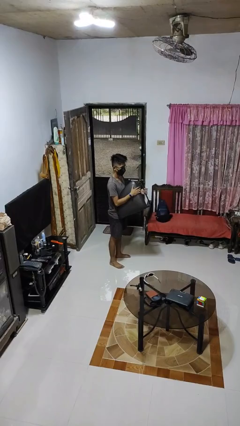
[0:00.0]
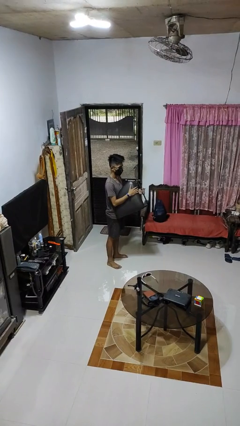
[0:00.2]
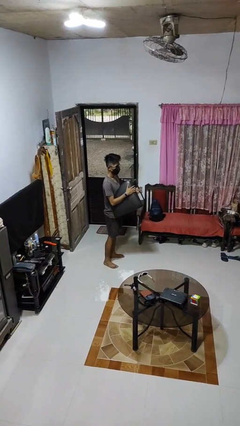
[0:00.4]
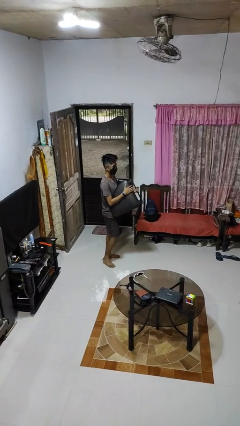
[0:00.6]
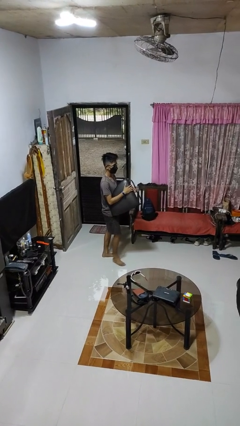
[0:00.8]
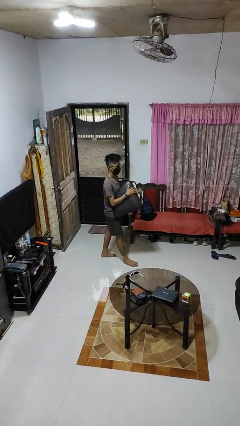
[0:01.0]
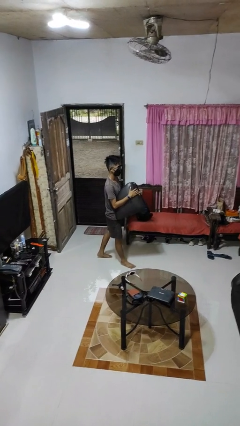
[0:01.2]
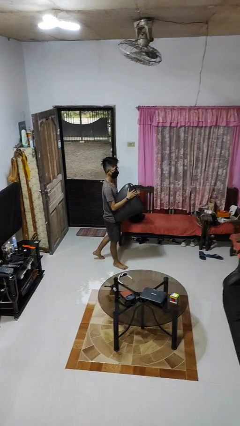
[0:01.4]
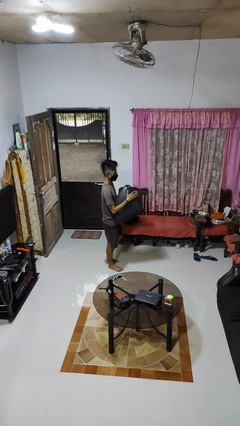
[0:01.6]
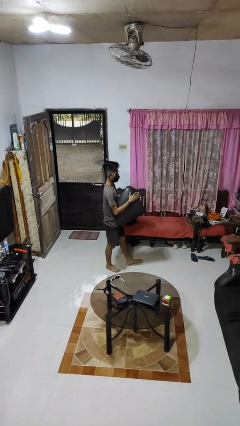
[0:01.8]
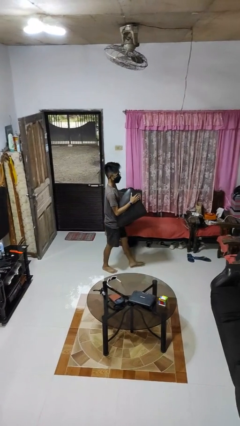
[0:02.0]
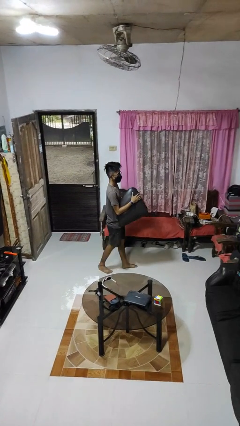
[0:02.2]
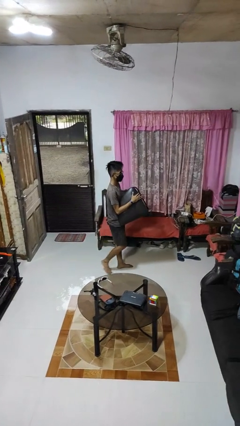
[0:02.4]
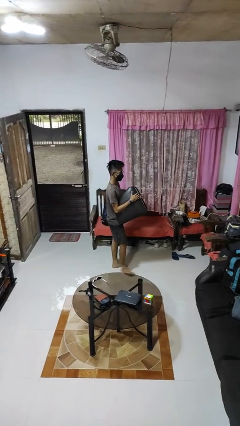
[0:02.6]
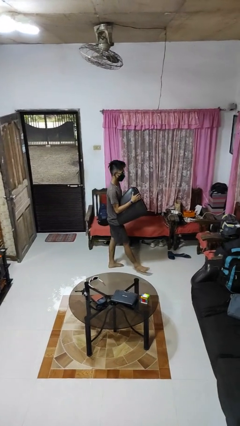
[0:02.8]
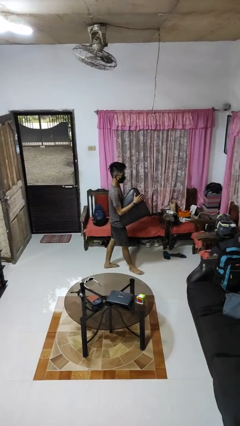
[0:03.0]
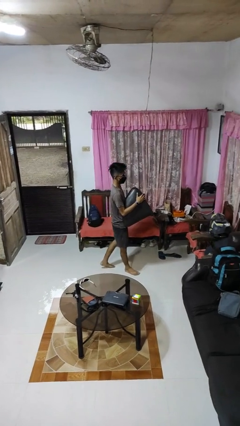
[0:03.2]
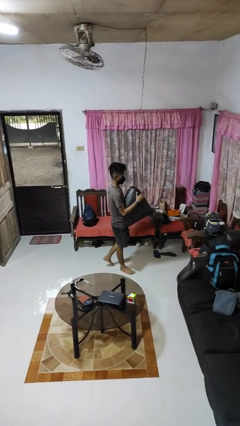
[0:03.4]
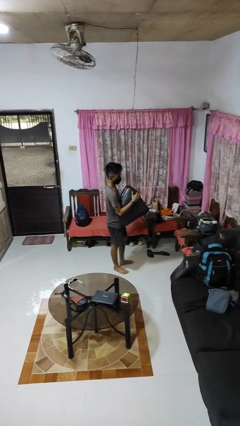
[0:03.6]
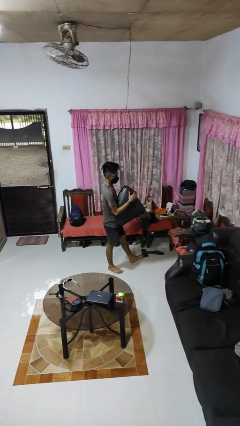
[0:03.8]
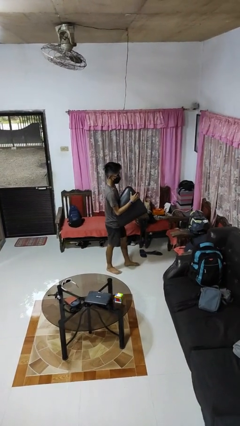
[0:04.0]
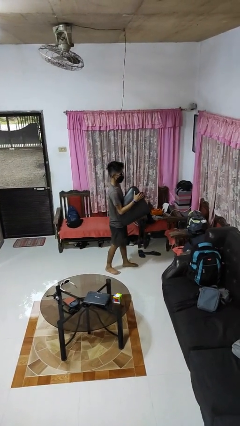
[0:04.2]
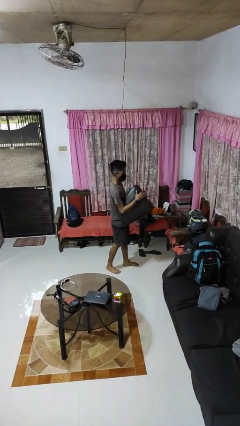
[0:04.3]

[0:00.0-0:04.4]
person carries furniture

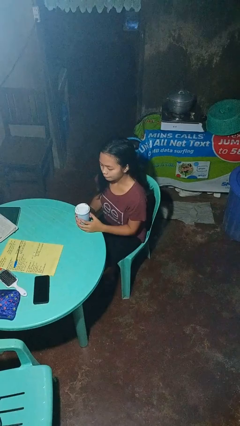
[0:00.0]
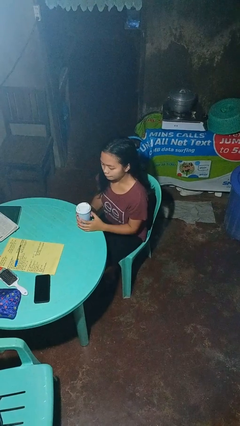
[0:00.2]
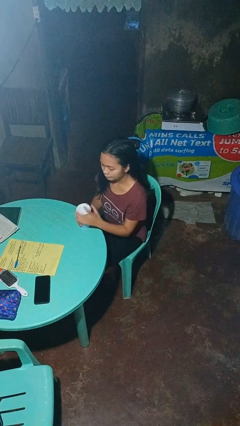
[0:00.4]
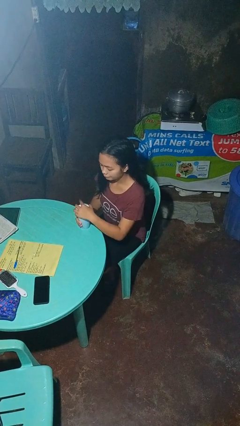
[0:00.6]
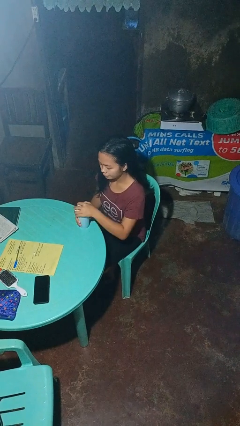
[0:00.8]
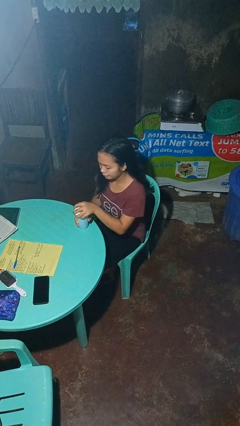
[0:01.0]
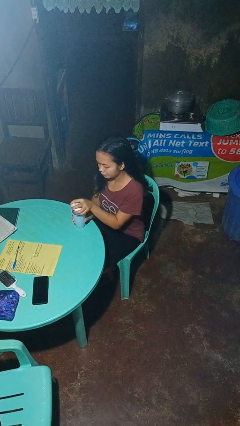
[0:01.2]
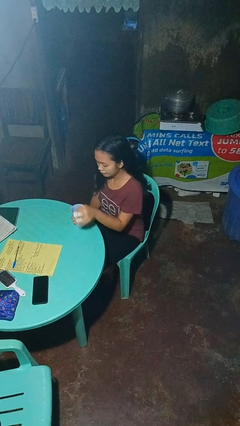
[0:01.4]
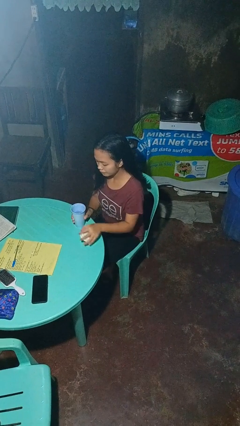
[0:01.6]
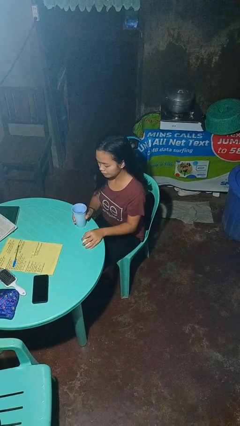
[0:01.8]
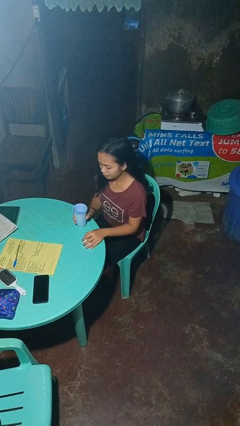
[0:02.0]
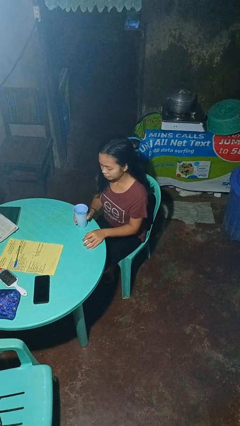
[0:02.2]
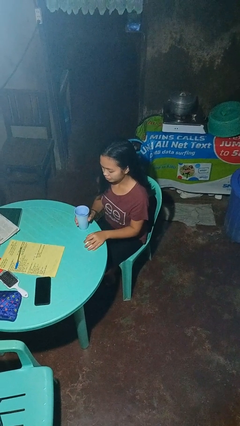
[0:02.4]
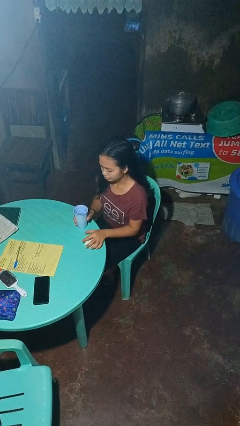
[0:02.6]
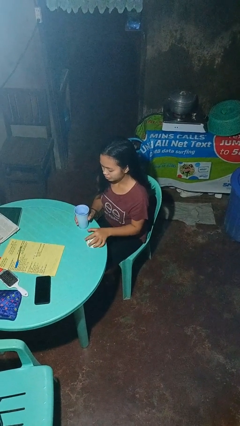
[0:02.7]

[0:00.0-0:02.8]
person unscrews lid from bottle

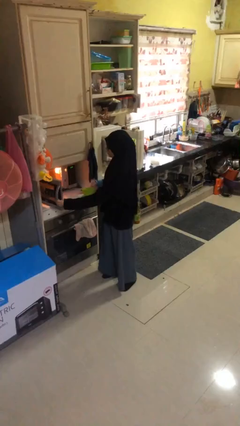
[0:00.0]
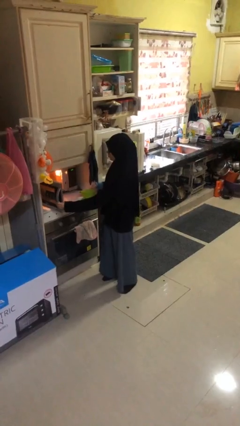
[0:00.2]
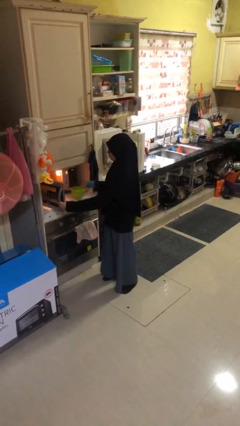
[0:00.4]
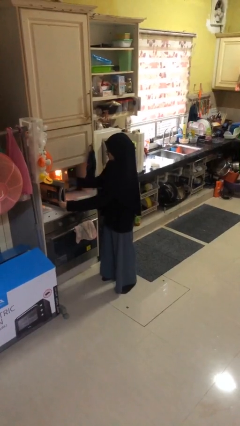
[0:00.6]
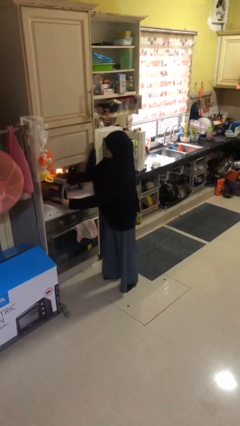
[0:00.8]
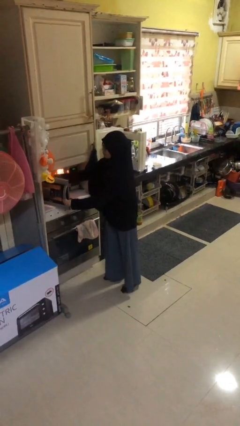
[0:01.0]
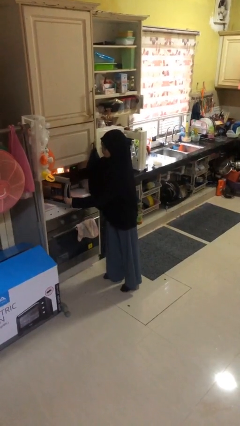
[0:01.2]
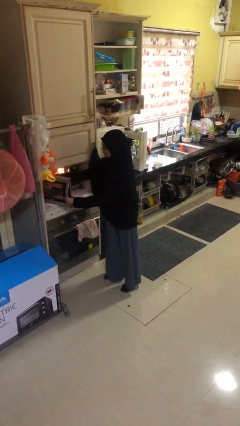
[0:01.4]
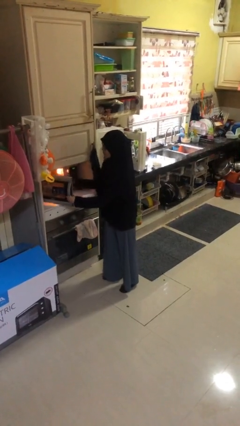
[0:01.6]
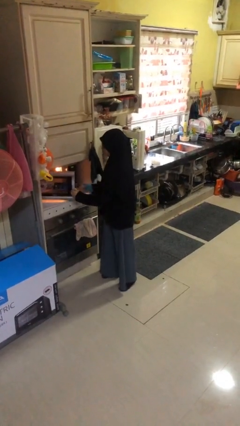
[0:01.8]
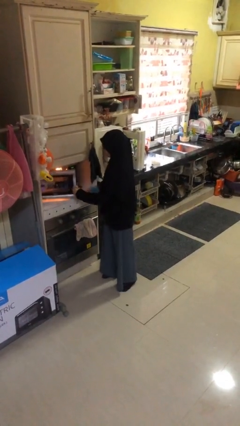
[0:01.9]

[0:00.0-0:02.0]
person puts object into microwave

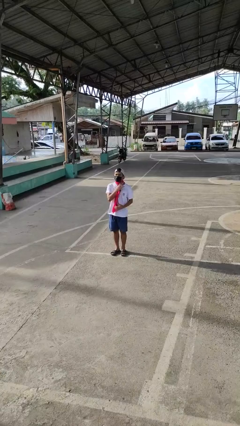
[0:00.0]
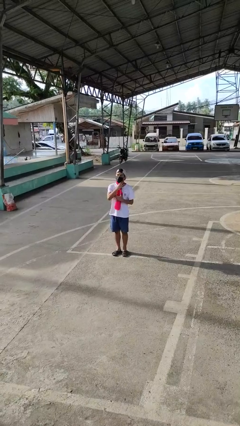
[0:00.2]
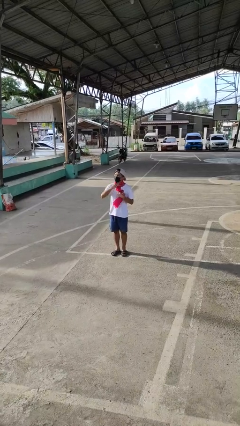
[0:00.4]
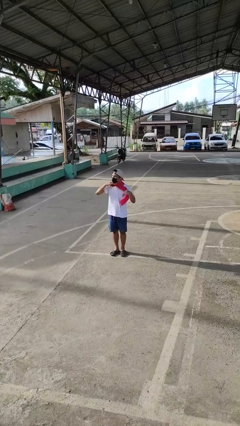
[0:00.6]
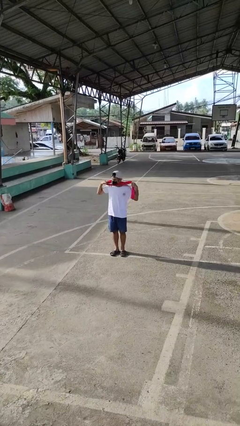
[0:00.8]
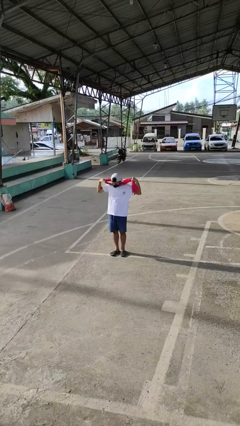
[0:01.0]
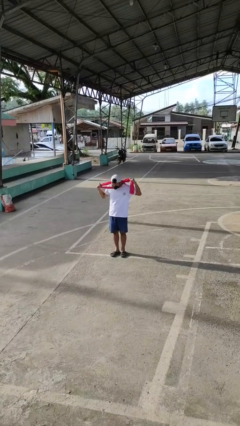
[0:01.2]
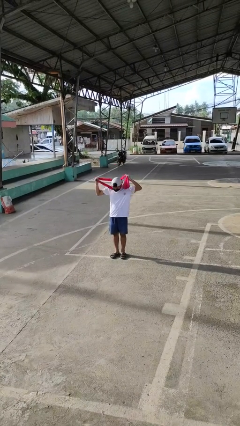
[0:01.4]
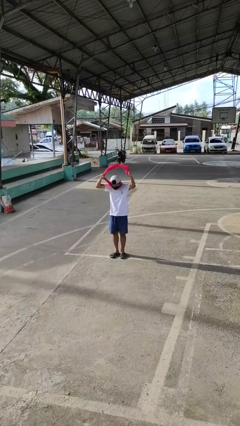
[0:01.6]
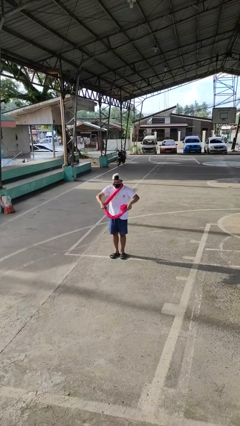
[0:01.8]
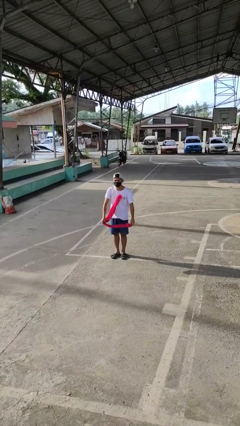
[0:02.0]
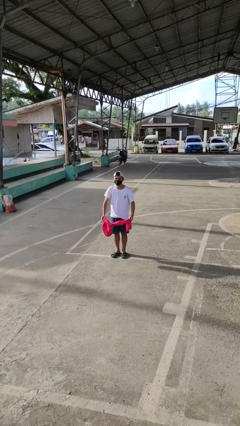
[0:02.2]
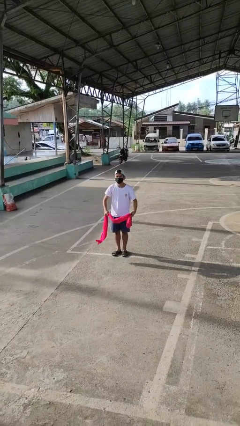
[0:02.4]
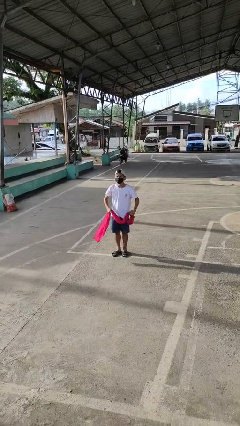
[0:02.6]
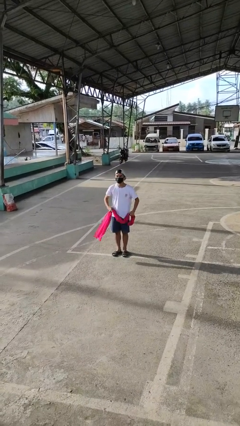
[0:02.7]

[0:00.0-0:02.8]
person takes off scarf

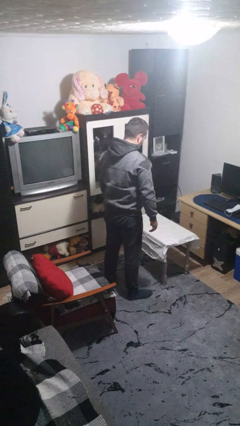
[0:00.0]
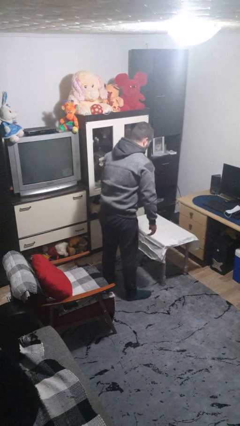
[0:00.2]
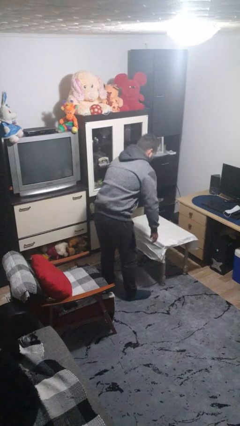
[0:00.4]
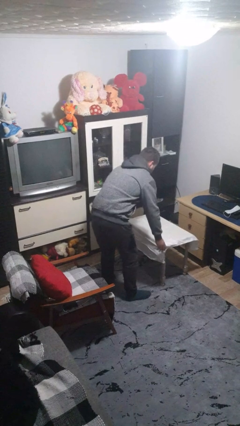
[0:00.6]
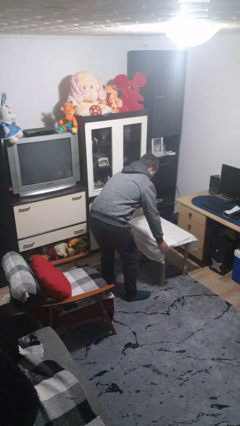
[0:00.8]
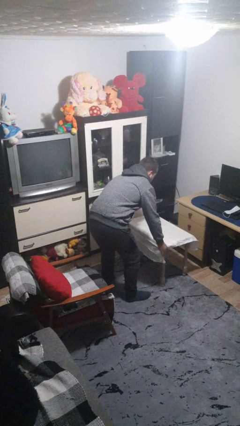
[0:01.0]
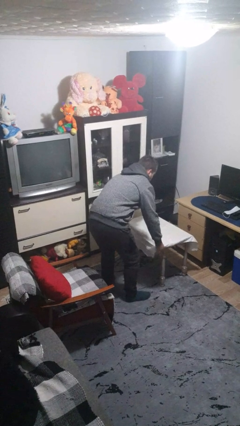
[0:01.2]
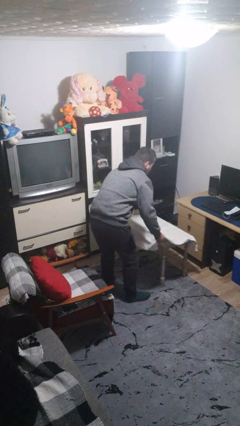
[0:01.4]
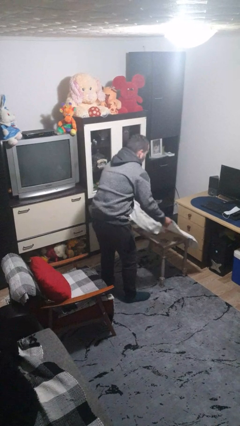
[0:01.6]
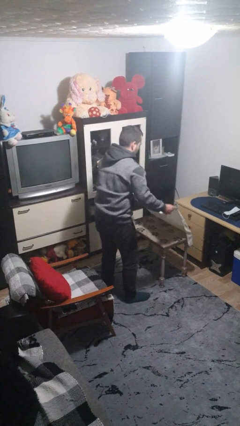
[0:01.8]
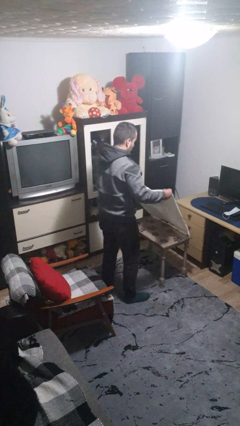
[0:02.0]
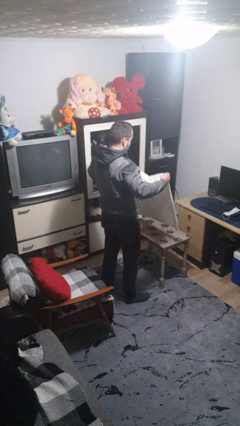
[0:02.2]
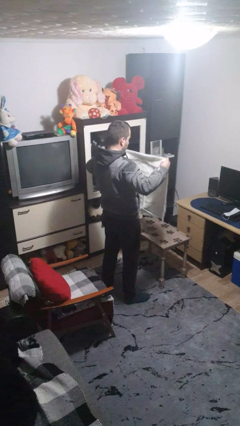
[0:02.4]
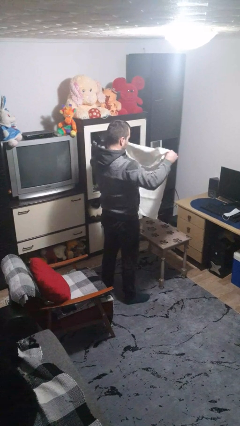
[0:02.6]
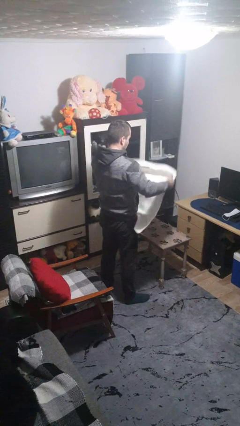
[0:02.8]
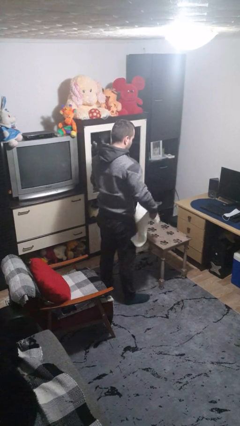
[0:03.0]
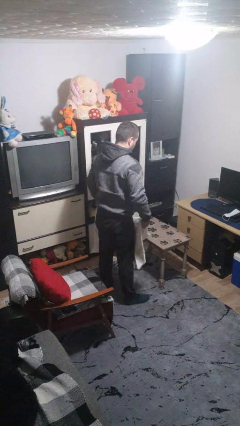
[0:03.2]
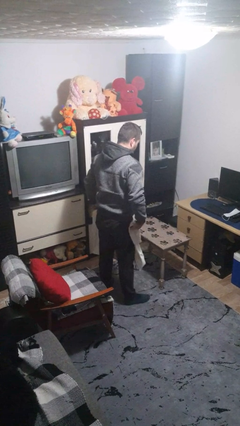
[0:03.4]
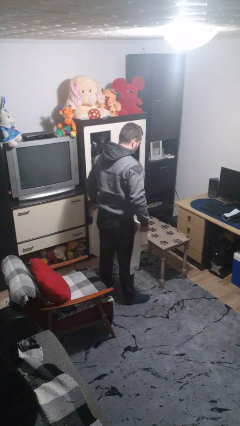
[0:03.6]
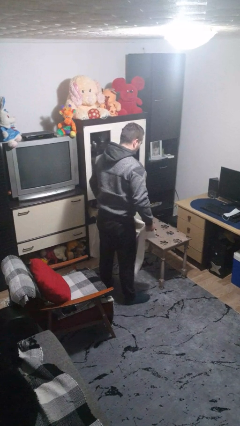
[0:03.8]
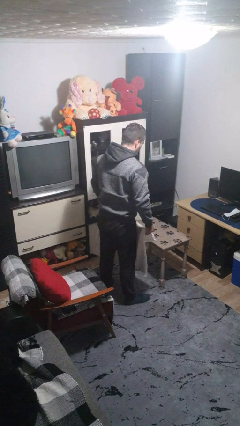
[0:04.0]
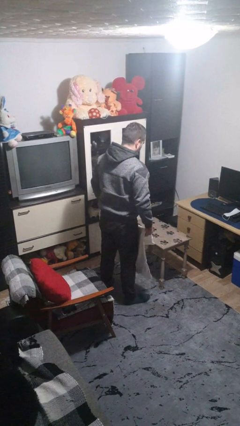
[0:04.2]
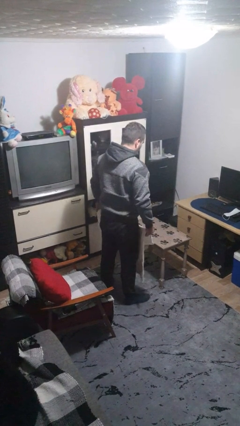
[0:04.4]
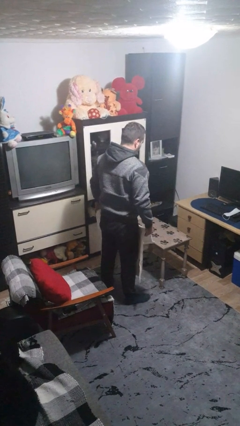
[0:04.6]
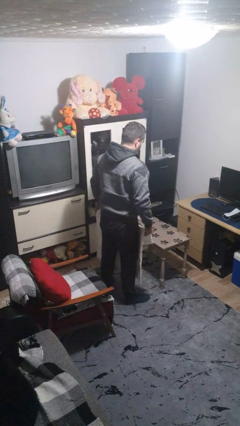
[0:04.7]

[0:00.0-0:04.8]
person folds tablecloth

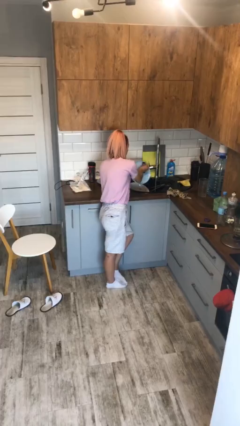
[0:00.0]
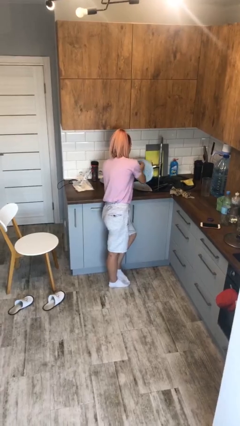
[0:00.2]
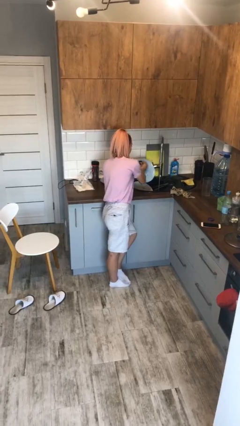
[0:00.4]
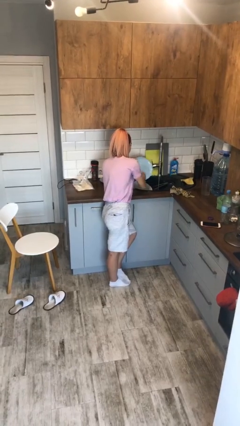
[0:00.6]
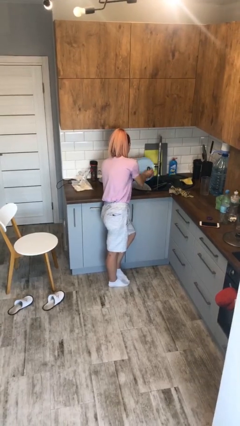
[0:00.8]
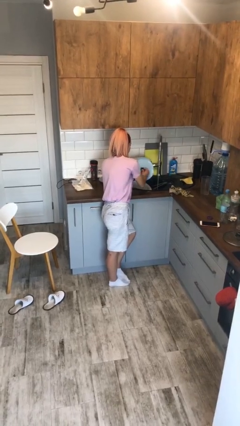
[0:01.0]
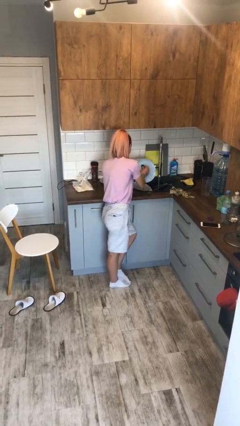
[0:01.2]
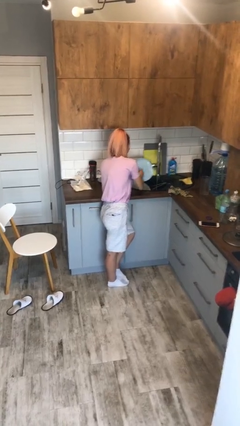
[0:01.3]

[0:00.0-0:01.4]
person washes dish
